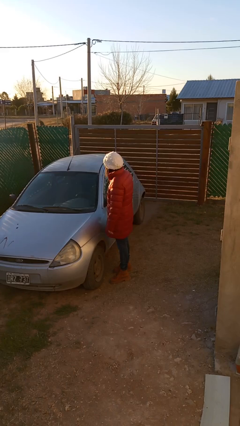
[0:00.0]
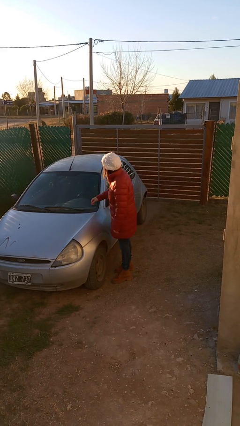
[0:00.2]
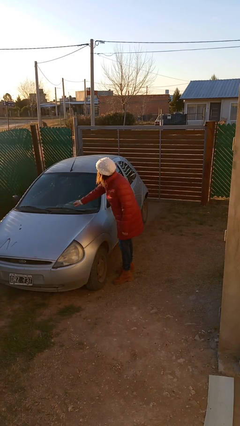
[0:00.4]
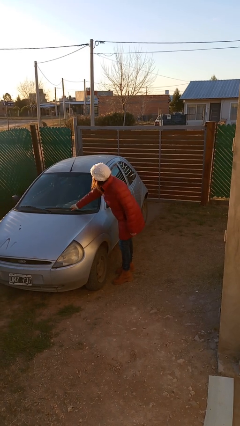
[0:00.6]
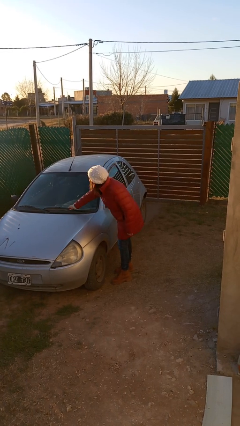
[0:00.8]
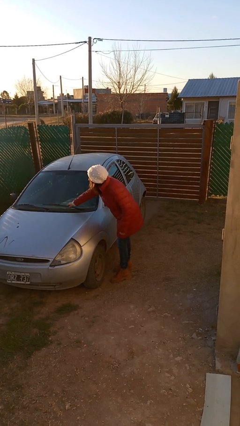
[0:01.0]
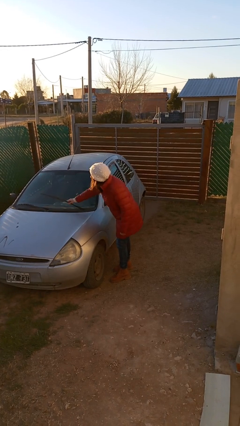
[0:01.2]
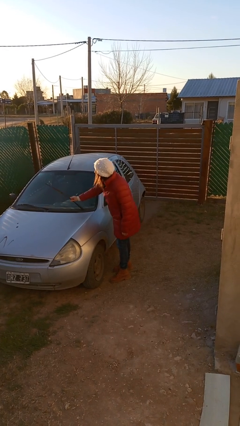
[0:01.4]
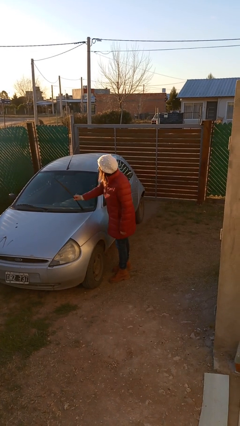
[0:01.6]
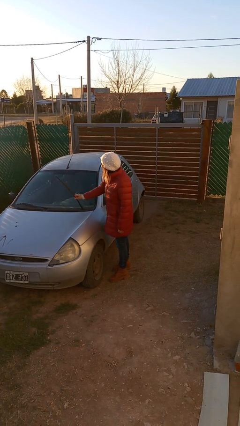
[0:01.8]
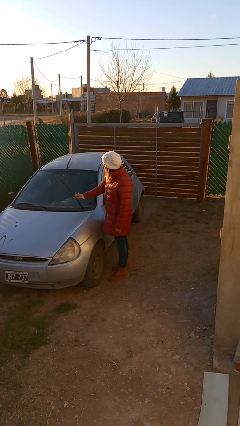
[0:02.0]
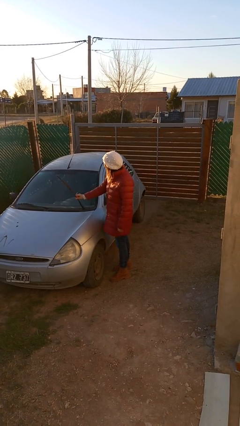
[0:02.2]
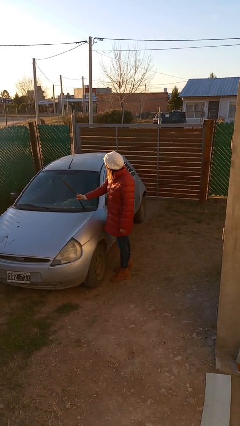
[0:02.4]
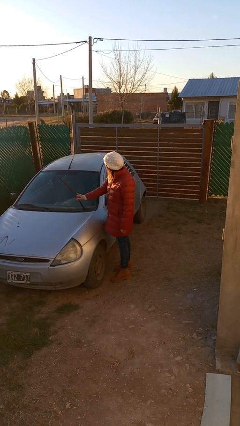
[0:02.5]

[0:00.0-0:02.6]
person flips up car wipers

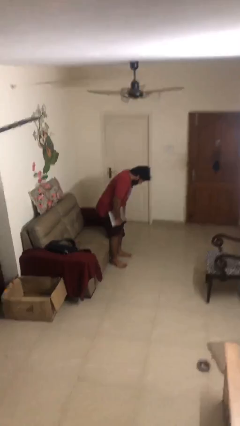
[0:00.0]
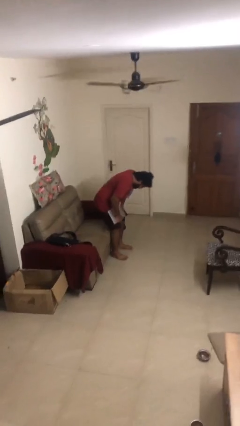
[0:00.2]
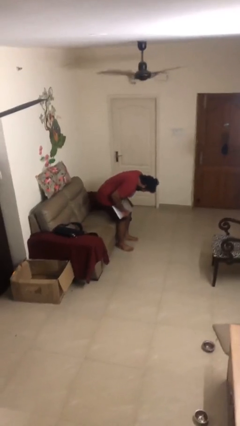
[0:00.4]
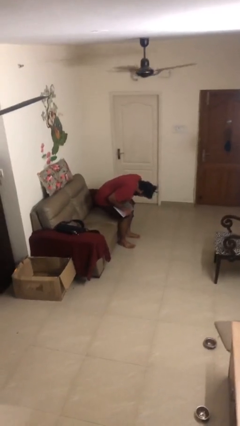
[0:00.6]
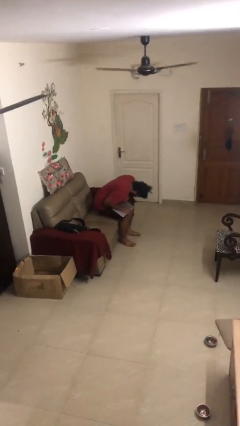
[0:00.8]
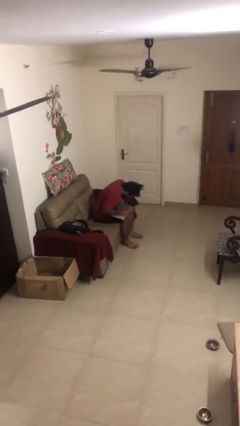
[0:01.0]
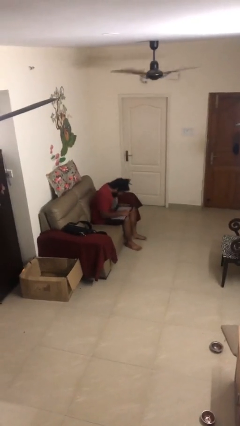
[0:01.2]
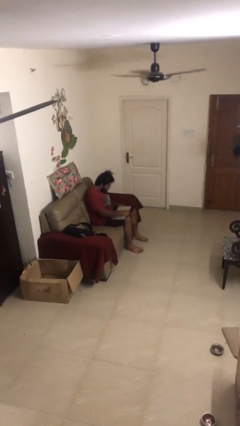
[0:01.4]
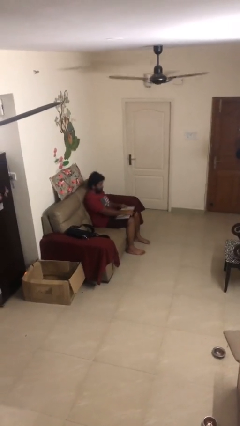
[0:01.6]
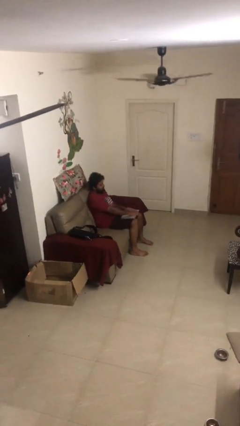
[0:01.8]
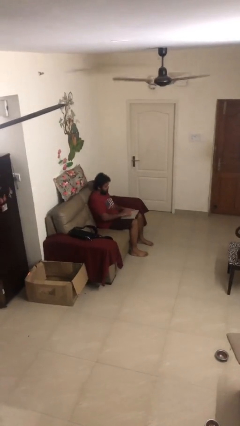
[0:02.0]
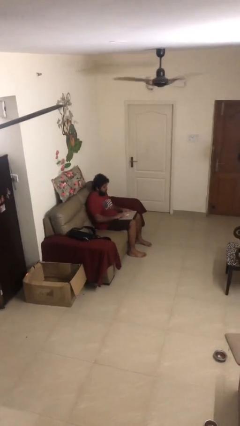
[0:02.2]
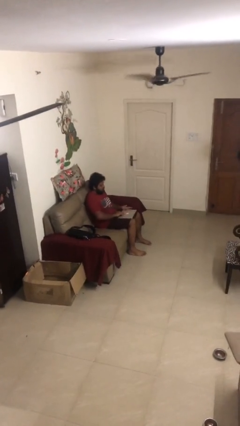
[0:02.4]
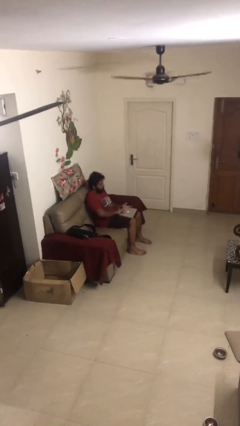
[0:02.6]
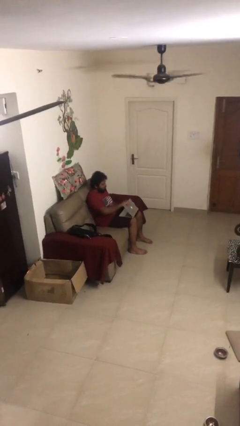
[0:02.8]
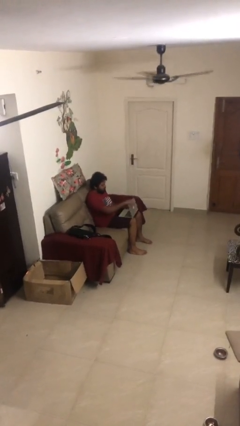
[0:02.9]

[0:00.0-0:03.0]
person sits down

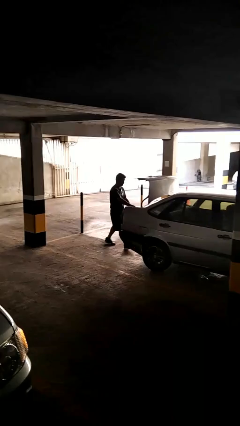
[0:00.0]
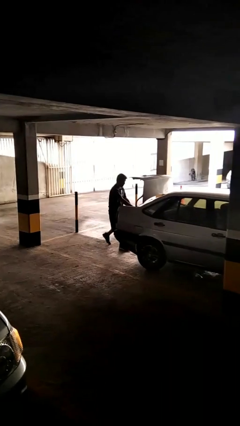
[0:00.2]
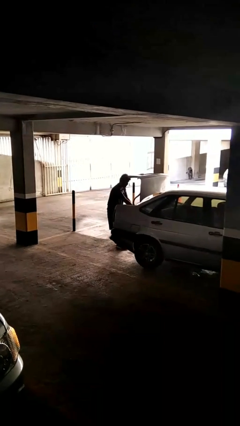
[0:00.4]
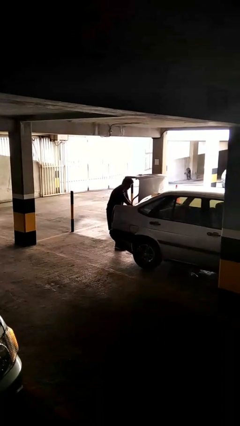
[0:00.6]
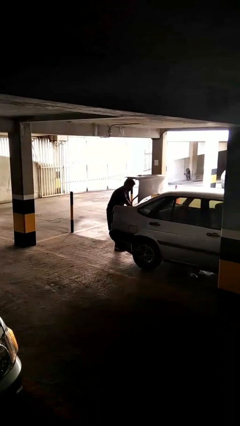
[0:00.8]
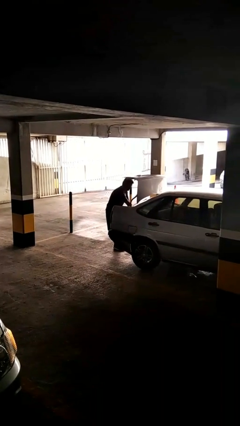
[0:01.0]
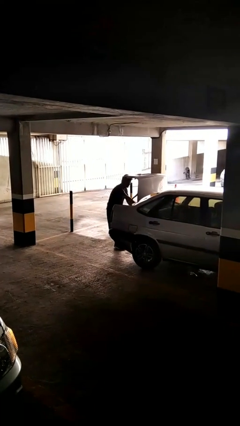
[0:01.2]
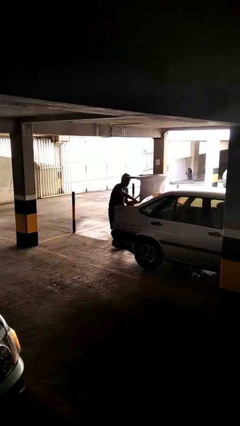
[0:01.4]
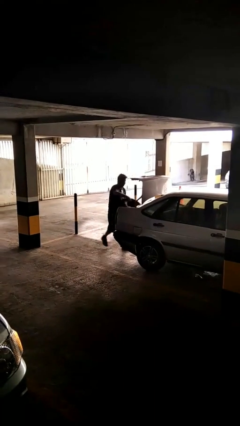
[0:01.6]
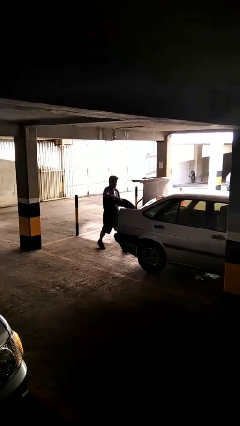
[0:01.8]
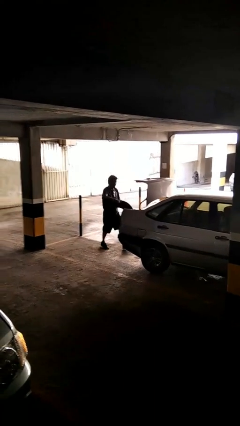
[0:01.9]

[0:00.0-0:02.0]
person unloads car

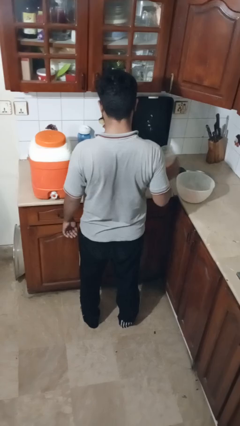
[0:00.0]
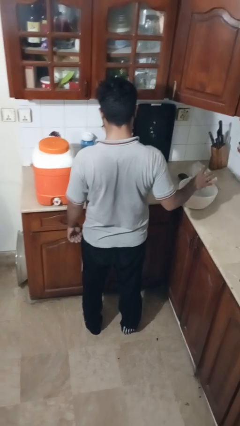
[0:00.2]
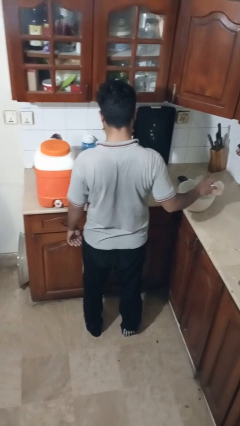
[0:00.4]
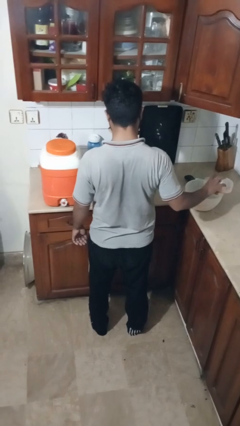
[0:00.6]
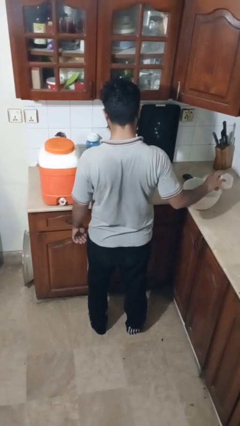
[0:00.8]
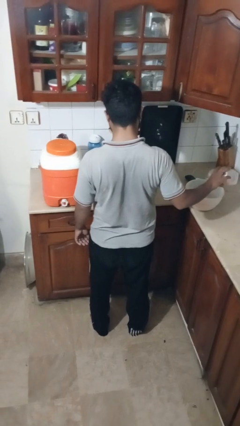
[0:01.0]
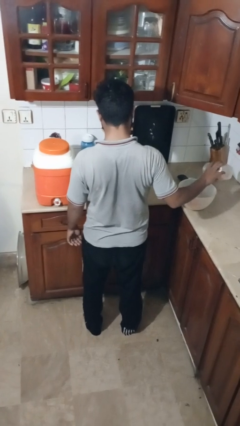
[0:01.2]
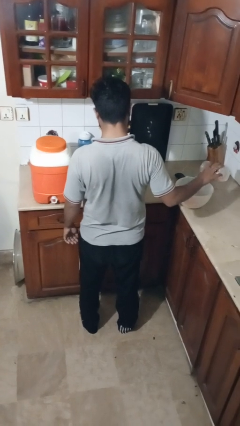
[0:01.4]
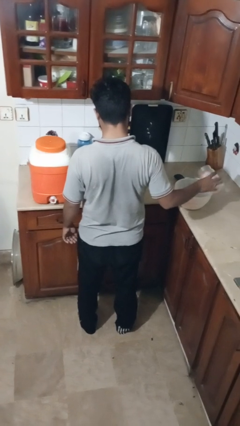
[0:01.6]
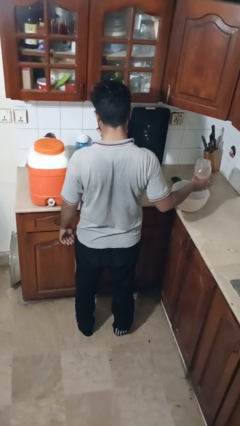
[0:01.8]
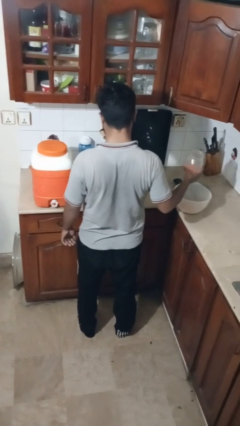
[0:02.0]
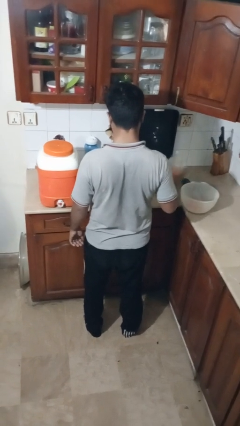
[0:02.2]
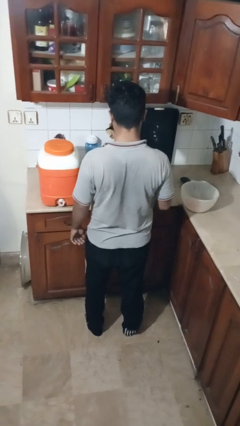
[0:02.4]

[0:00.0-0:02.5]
person pours into bowl

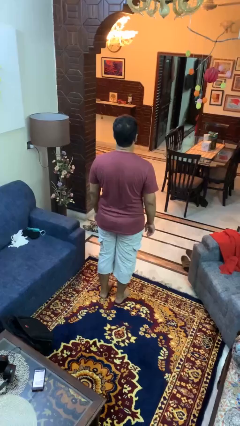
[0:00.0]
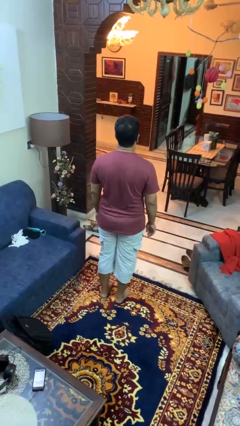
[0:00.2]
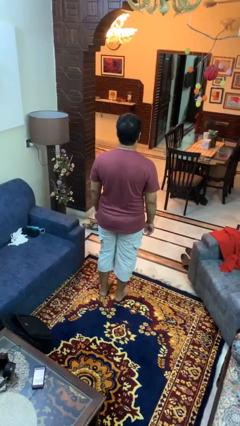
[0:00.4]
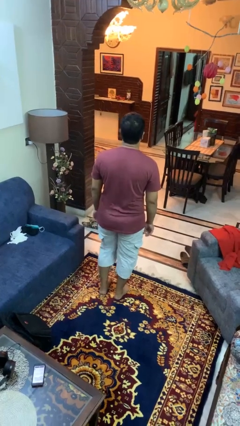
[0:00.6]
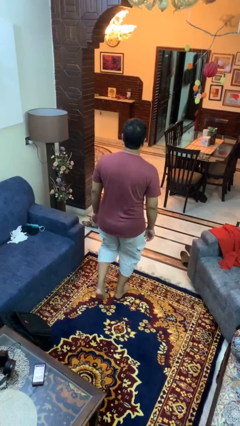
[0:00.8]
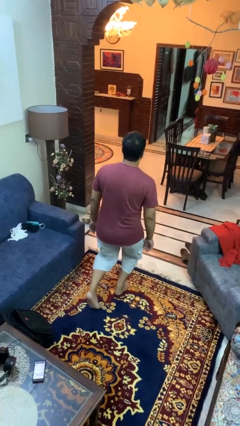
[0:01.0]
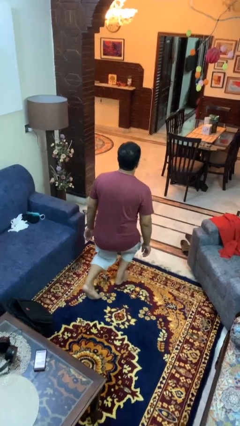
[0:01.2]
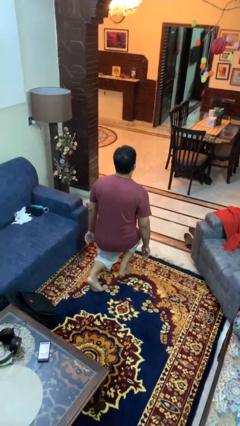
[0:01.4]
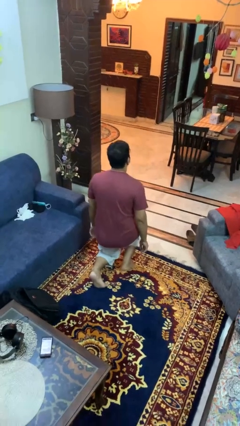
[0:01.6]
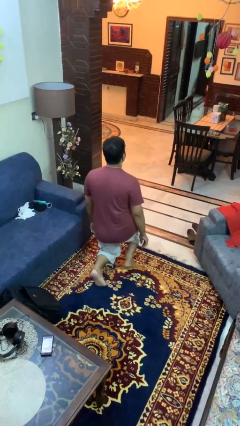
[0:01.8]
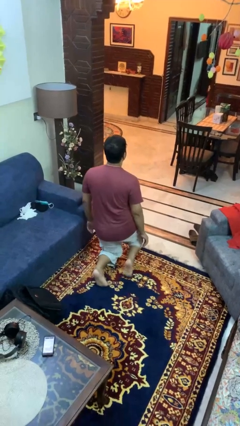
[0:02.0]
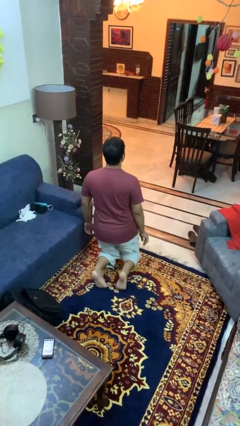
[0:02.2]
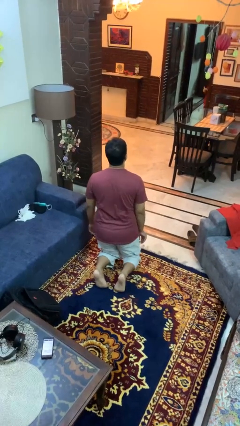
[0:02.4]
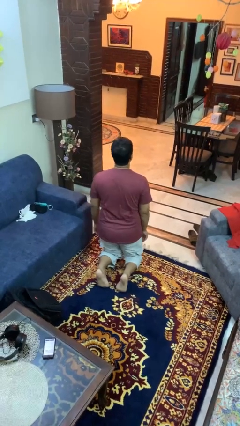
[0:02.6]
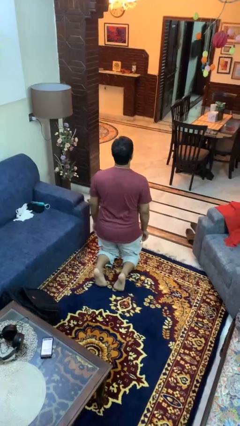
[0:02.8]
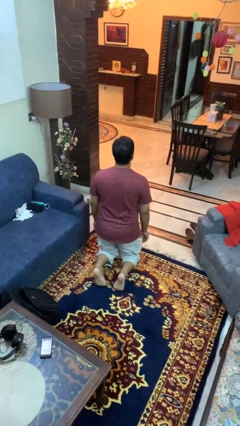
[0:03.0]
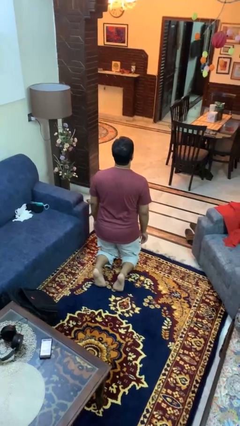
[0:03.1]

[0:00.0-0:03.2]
person kneels

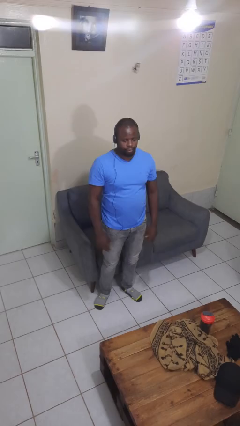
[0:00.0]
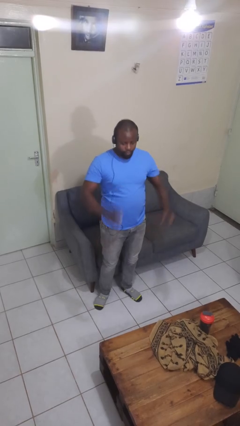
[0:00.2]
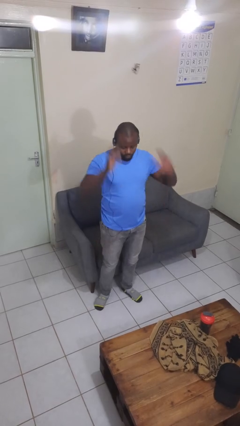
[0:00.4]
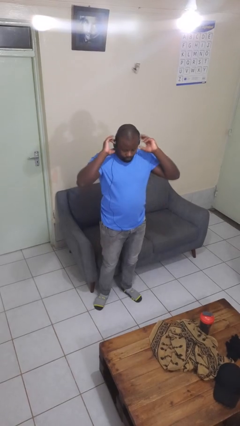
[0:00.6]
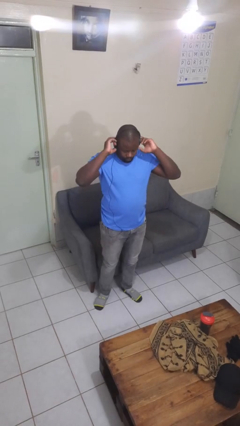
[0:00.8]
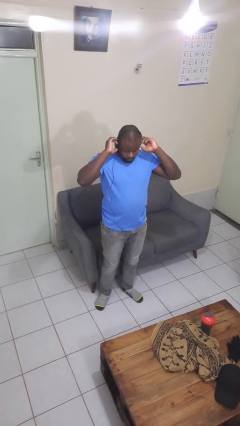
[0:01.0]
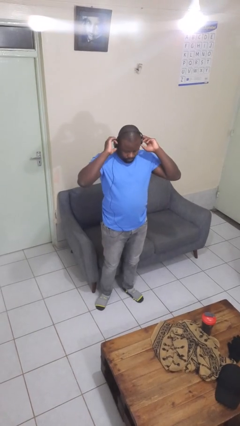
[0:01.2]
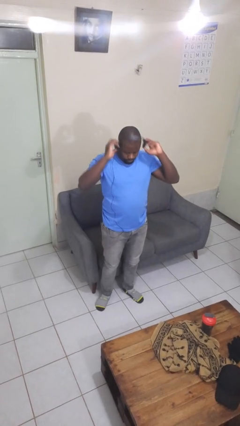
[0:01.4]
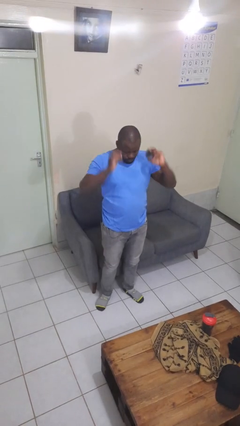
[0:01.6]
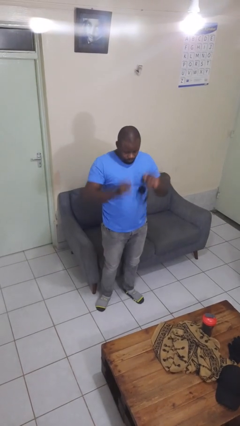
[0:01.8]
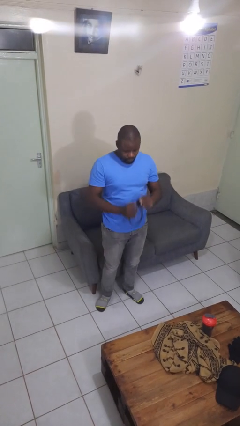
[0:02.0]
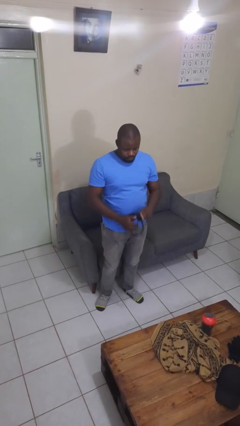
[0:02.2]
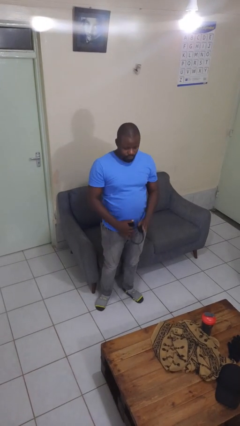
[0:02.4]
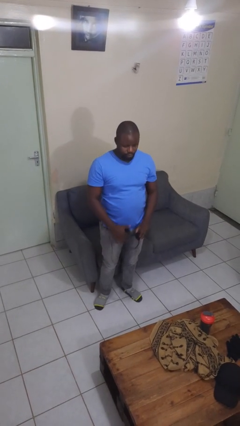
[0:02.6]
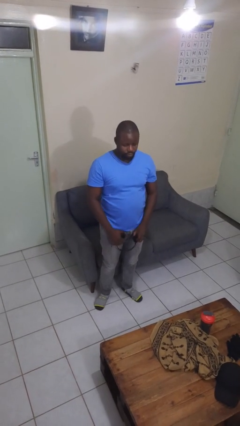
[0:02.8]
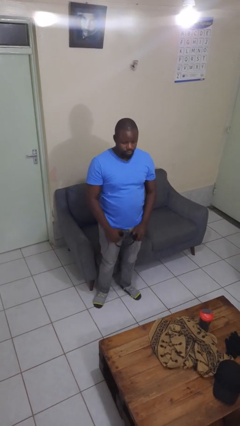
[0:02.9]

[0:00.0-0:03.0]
person takes off headphones

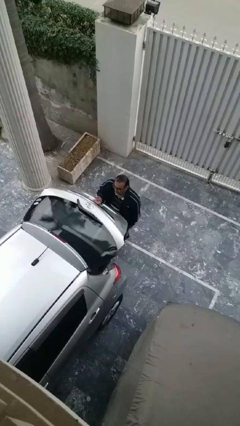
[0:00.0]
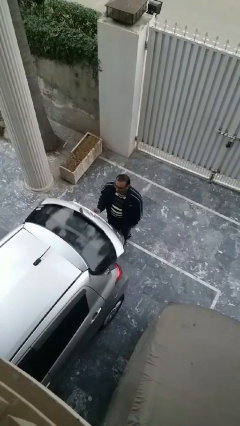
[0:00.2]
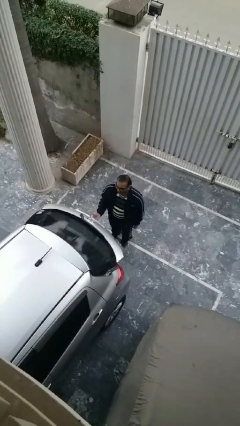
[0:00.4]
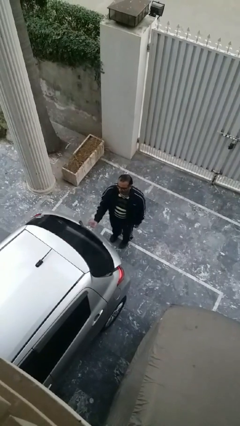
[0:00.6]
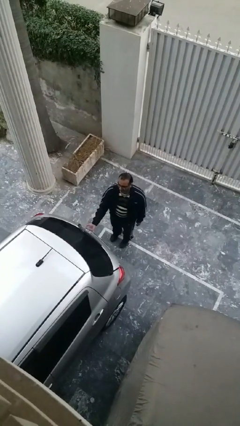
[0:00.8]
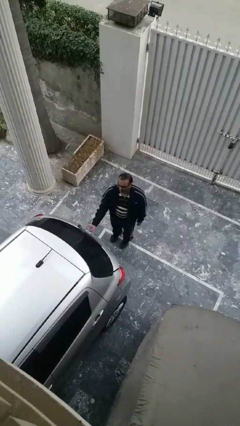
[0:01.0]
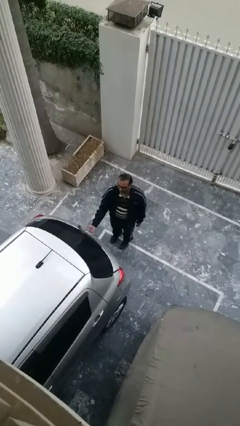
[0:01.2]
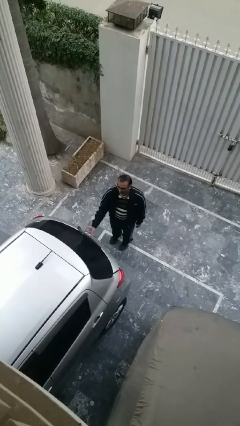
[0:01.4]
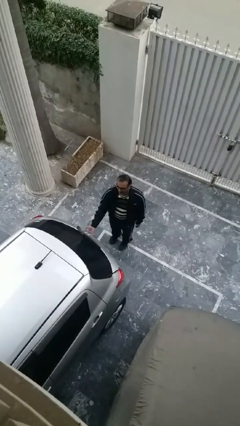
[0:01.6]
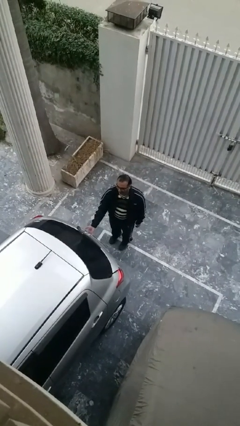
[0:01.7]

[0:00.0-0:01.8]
person closes car trunk
